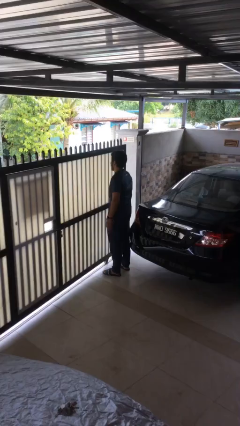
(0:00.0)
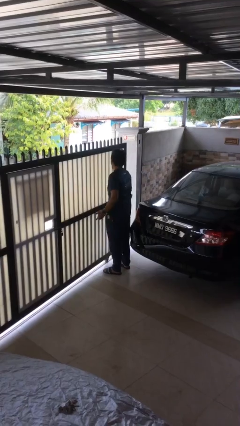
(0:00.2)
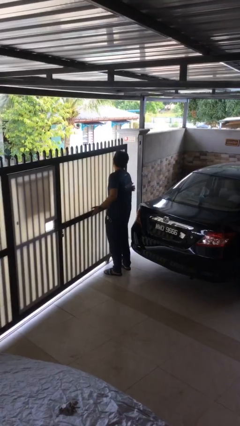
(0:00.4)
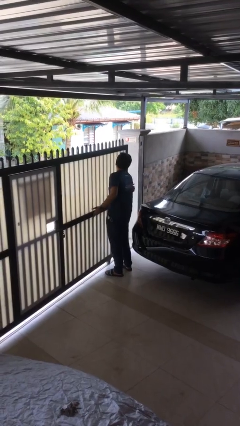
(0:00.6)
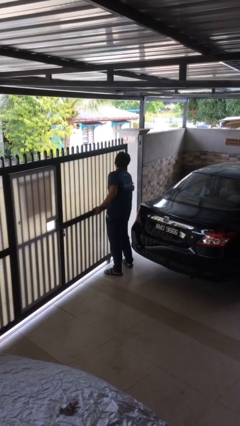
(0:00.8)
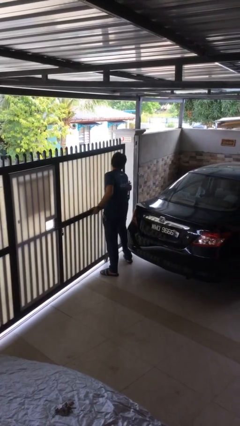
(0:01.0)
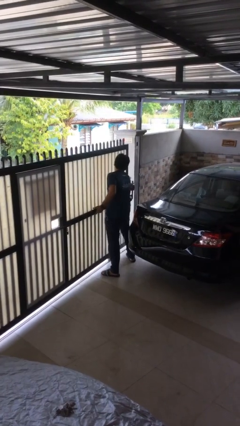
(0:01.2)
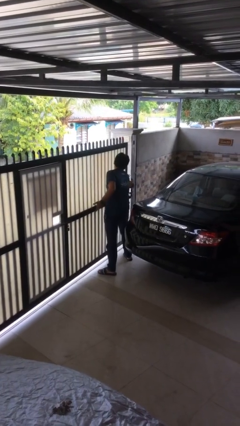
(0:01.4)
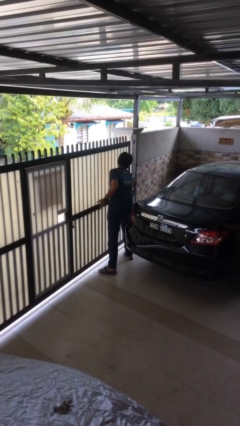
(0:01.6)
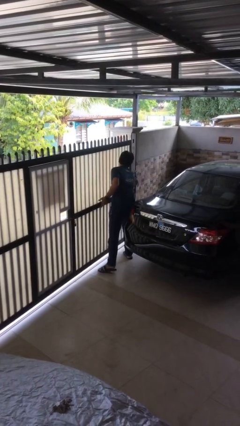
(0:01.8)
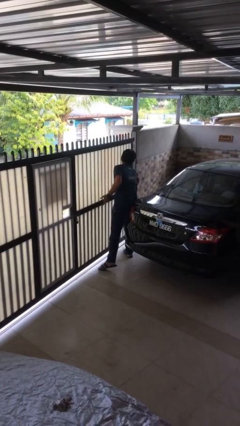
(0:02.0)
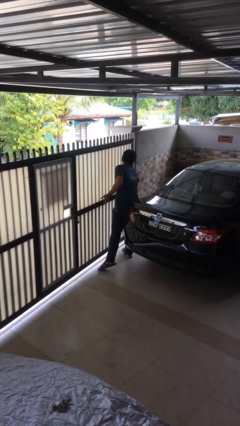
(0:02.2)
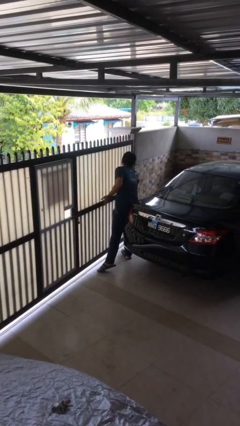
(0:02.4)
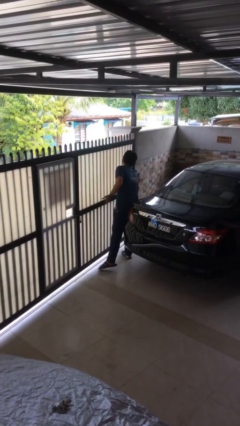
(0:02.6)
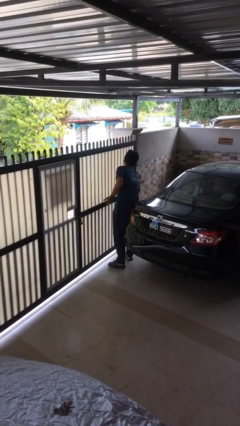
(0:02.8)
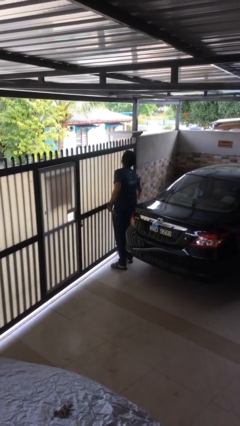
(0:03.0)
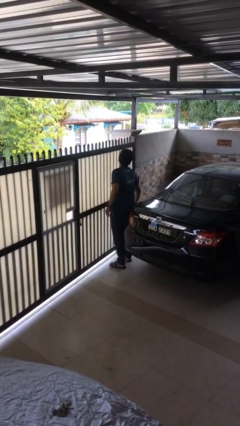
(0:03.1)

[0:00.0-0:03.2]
person closes sliding door

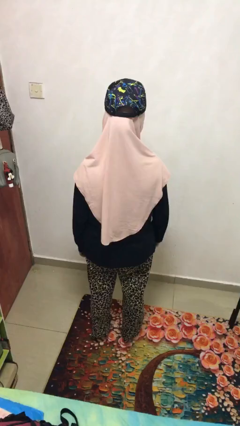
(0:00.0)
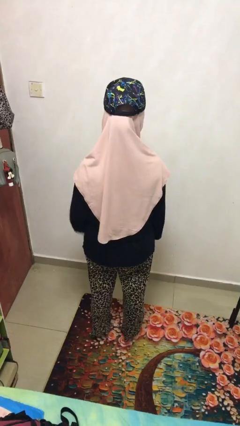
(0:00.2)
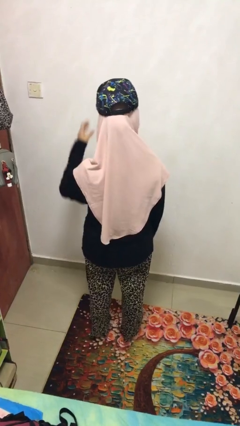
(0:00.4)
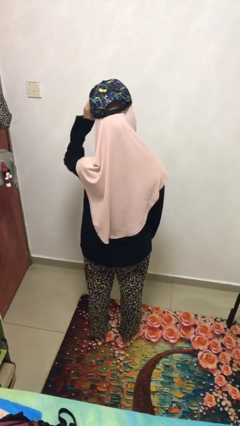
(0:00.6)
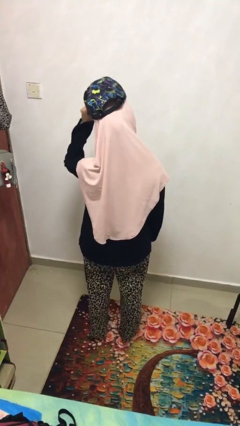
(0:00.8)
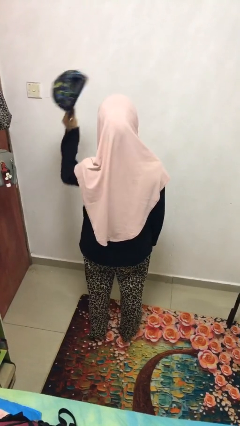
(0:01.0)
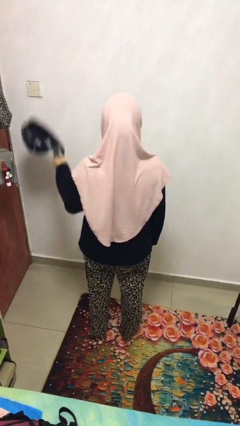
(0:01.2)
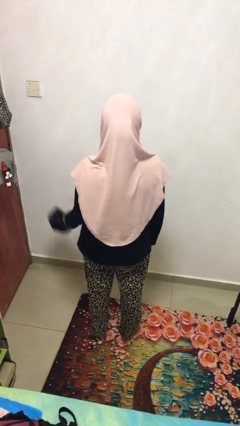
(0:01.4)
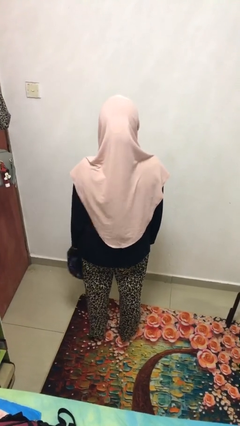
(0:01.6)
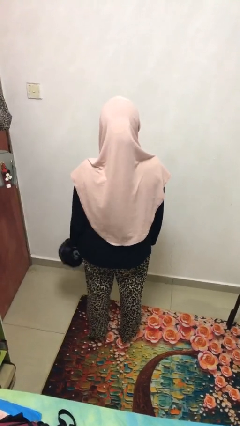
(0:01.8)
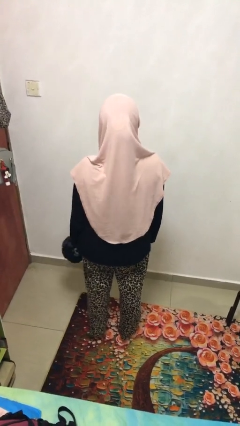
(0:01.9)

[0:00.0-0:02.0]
person takes off hat

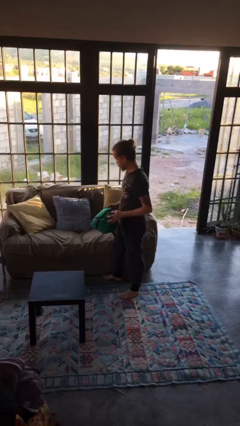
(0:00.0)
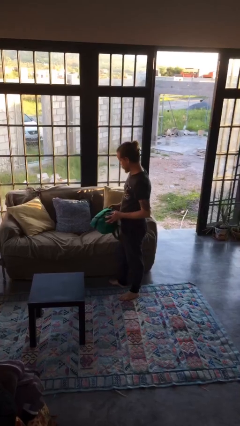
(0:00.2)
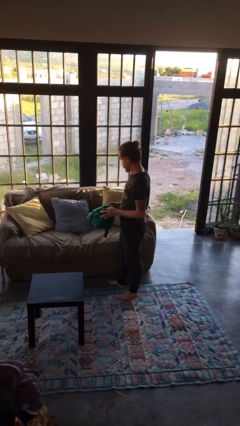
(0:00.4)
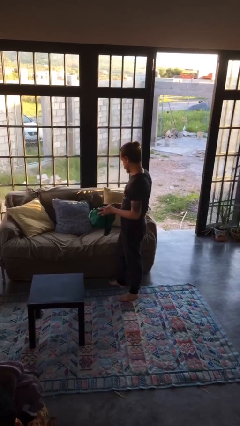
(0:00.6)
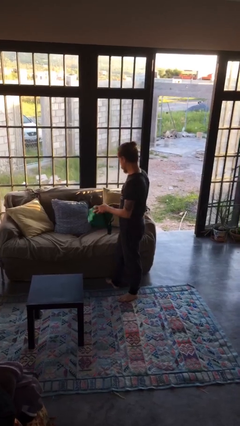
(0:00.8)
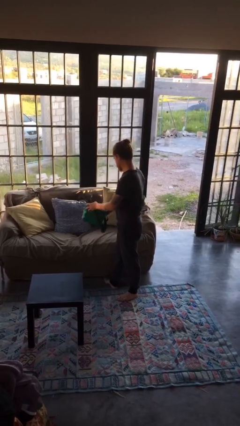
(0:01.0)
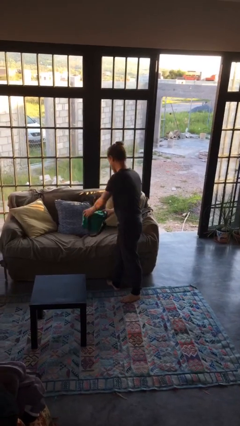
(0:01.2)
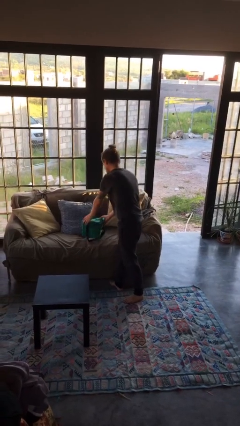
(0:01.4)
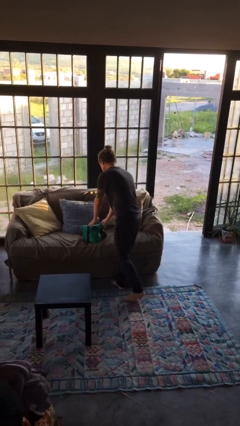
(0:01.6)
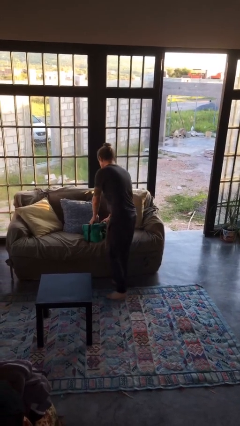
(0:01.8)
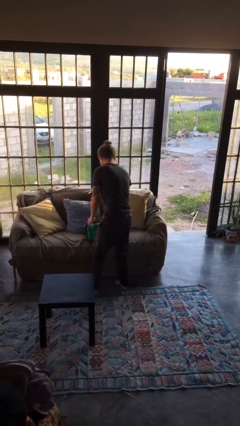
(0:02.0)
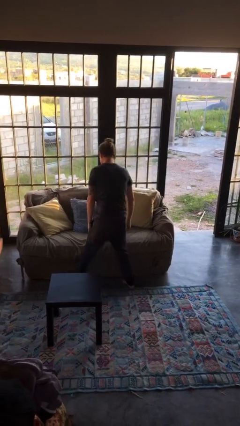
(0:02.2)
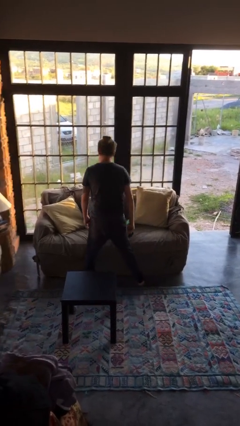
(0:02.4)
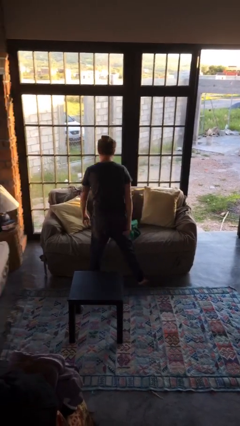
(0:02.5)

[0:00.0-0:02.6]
person puts down object on couch

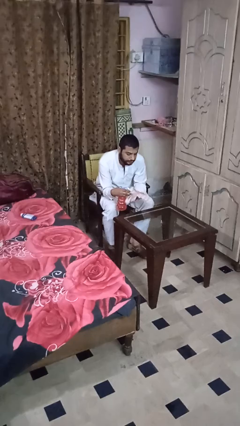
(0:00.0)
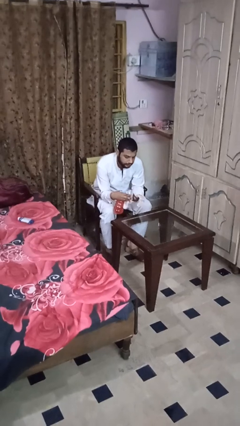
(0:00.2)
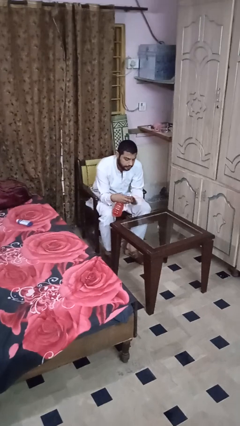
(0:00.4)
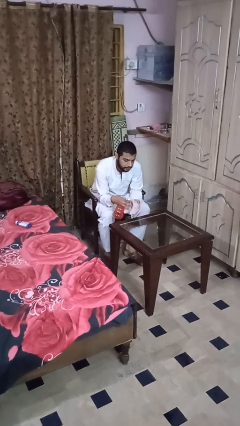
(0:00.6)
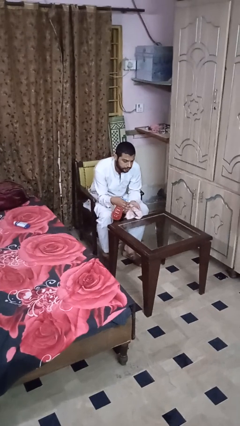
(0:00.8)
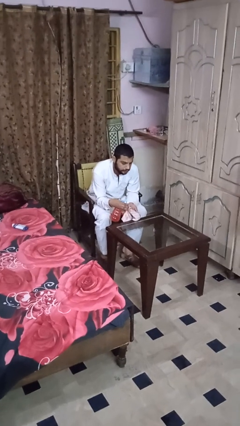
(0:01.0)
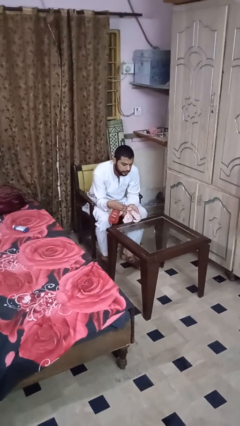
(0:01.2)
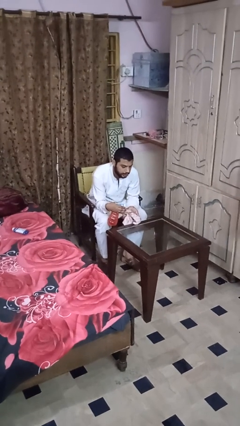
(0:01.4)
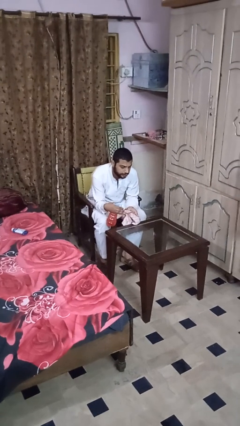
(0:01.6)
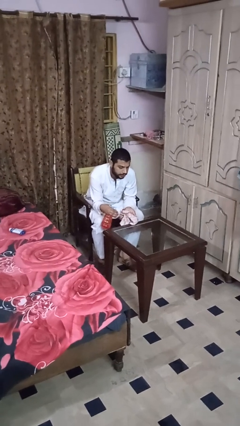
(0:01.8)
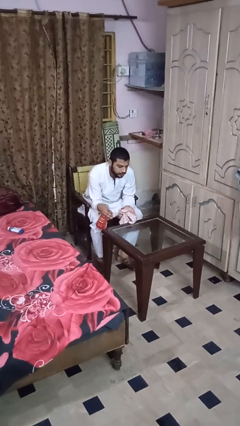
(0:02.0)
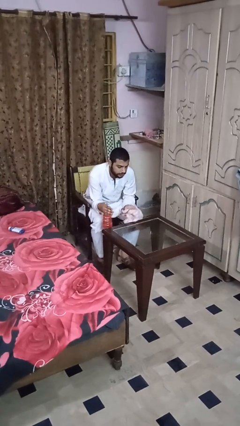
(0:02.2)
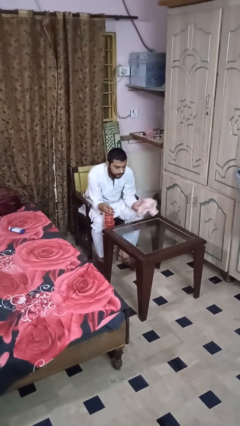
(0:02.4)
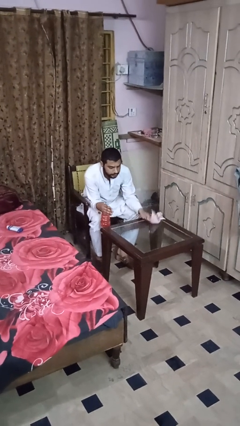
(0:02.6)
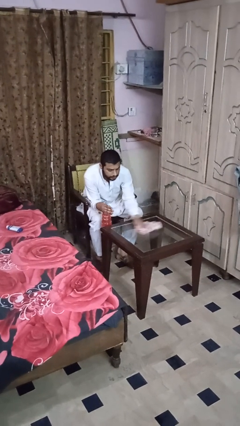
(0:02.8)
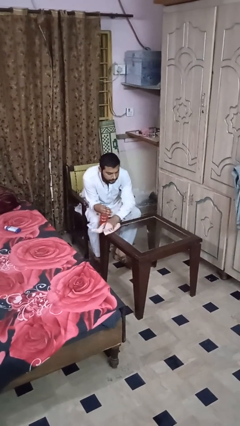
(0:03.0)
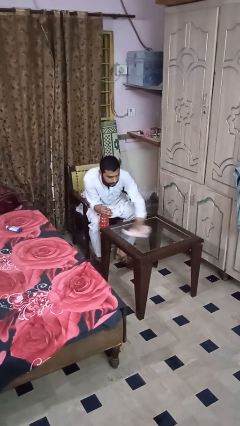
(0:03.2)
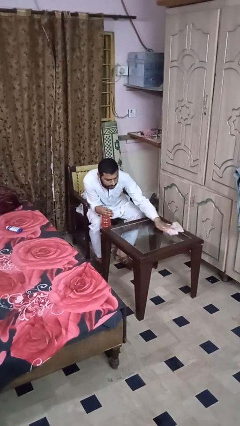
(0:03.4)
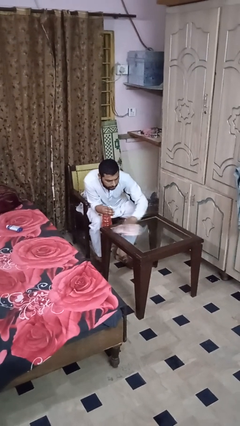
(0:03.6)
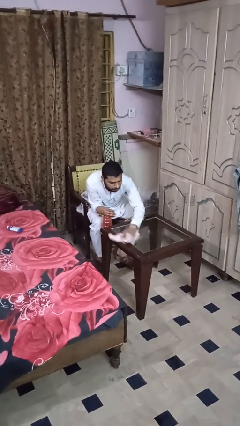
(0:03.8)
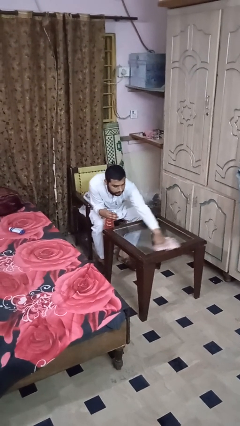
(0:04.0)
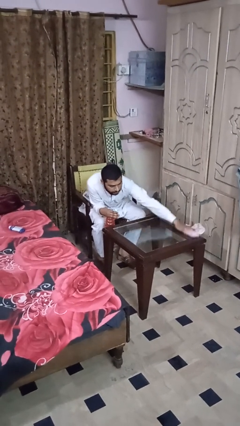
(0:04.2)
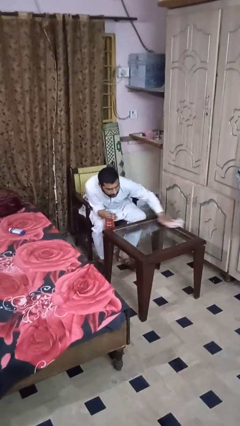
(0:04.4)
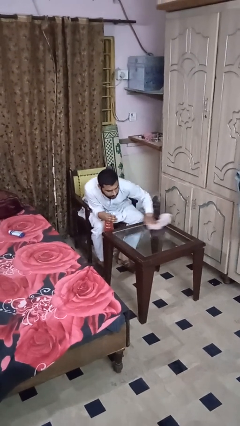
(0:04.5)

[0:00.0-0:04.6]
person sprays from bottle

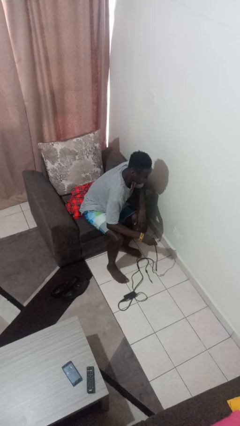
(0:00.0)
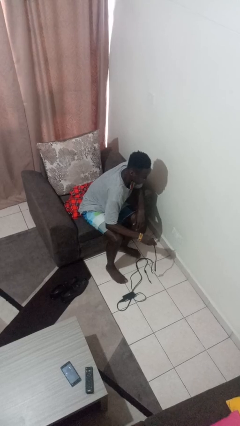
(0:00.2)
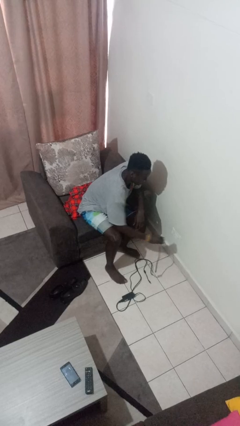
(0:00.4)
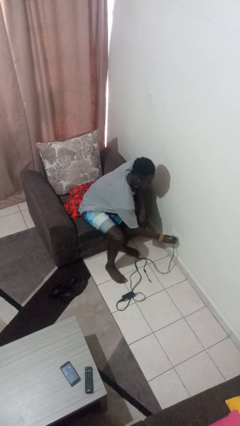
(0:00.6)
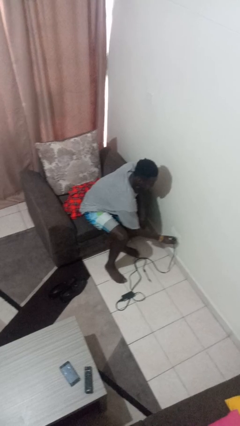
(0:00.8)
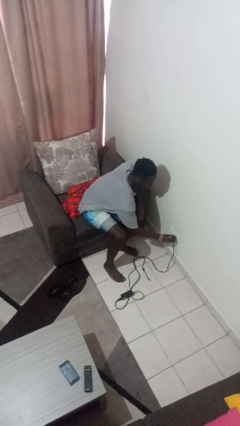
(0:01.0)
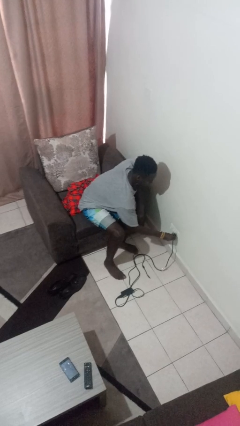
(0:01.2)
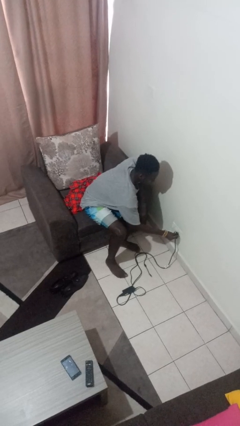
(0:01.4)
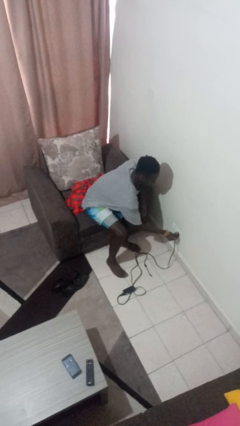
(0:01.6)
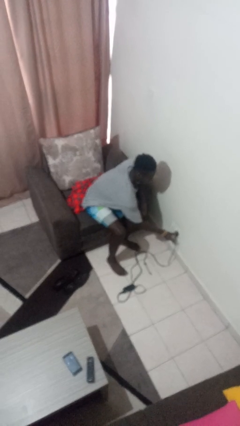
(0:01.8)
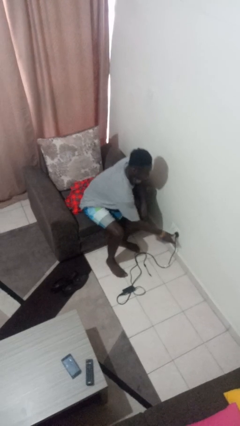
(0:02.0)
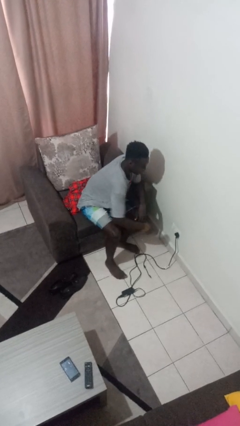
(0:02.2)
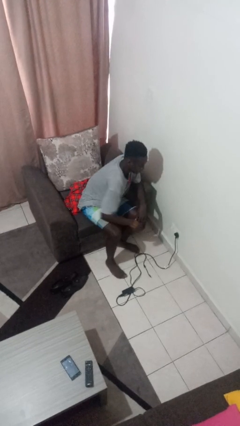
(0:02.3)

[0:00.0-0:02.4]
person plugs into electrical socket

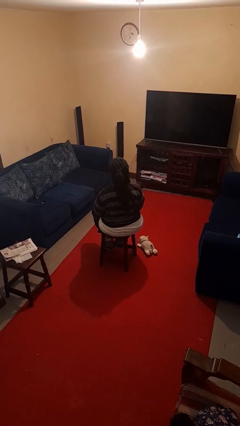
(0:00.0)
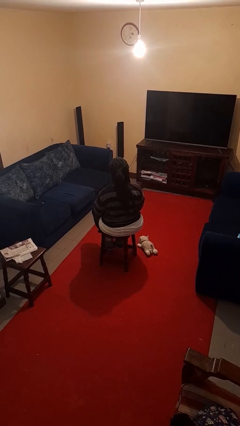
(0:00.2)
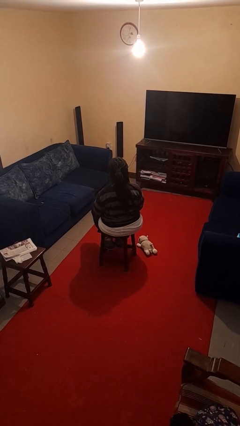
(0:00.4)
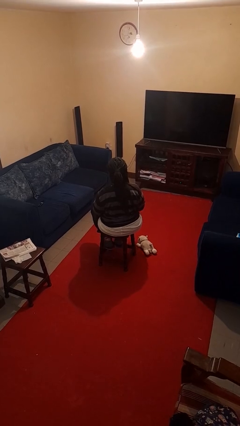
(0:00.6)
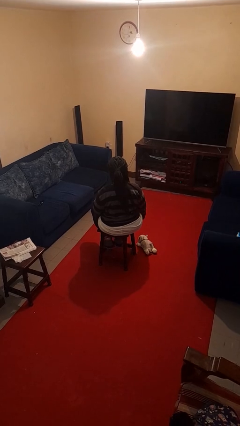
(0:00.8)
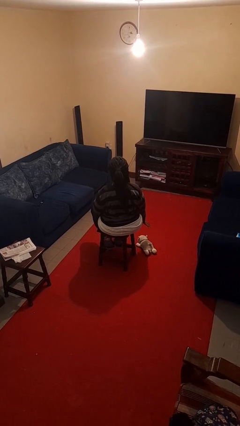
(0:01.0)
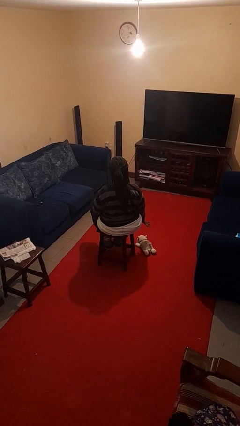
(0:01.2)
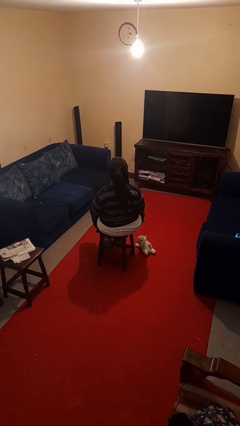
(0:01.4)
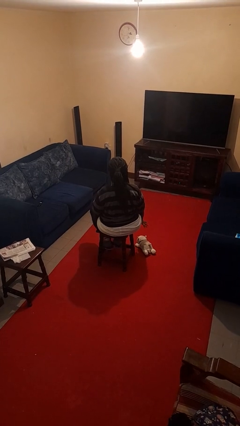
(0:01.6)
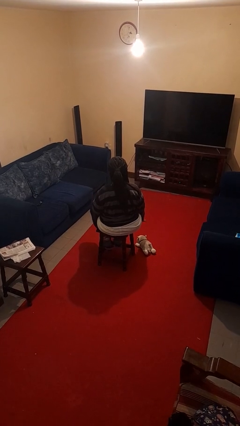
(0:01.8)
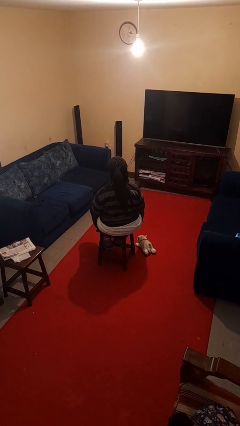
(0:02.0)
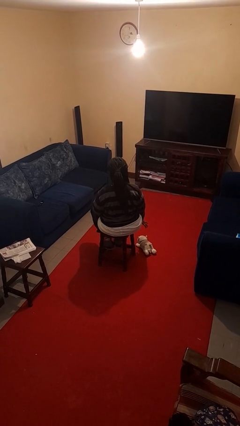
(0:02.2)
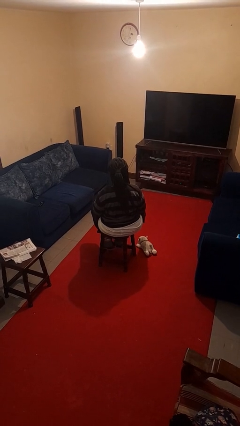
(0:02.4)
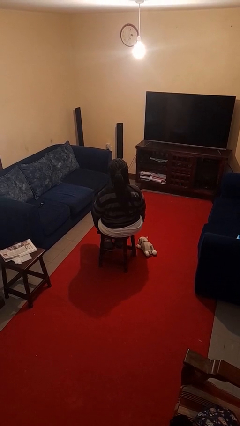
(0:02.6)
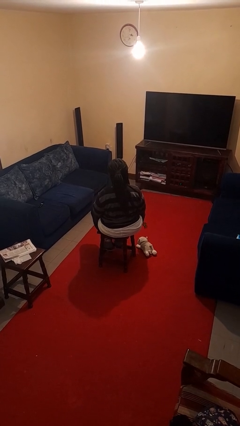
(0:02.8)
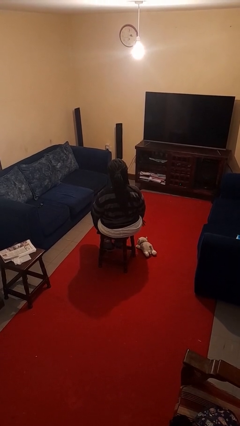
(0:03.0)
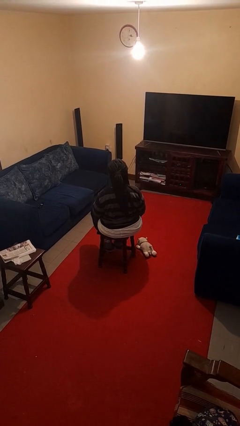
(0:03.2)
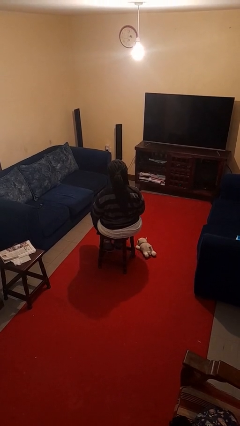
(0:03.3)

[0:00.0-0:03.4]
person waves hand over object
